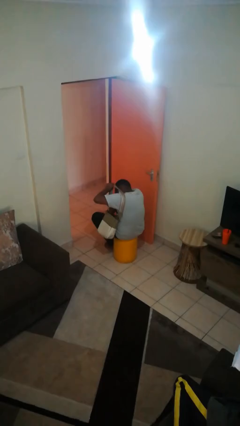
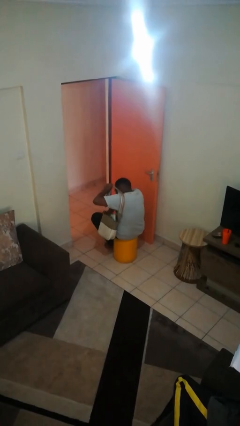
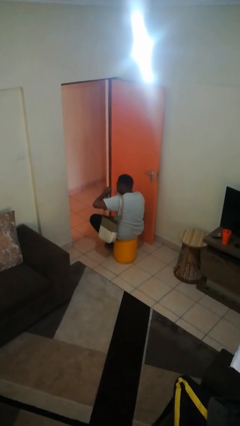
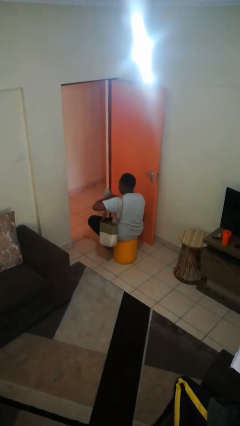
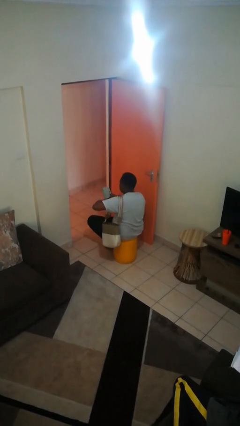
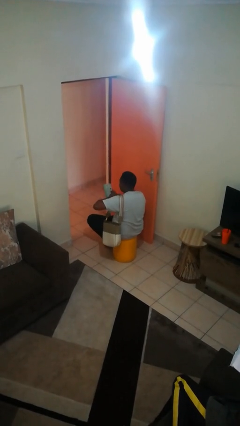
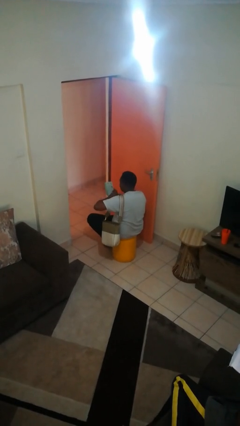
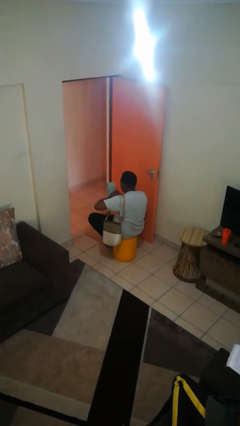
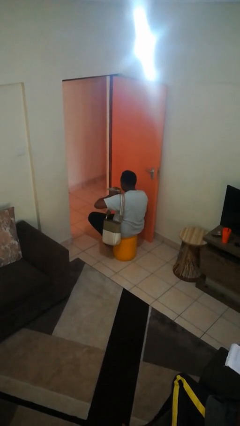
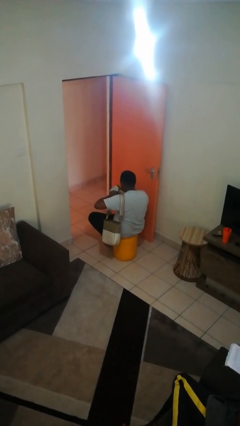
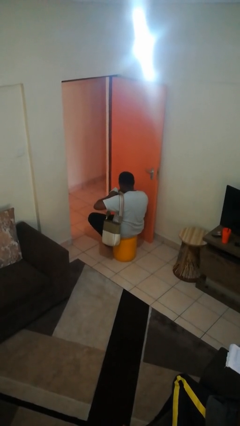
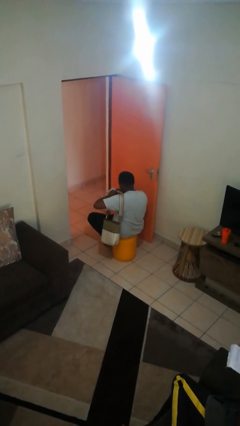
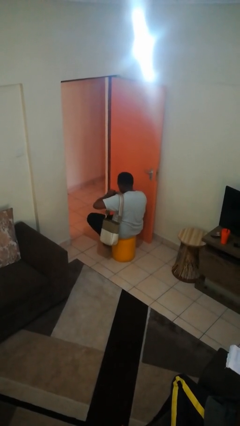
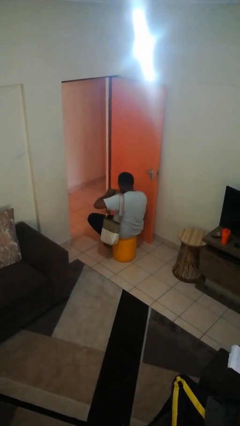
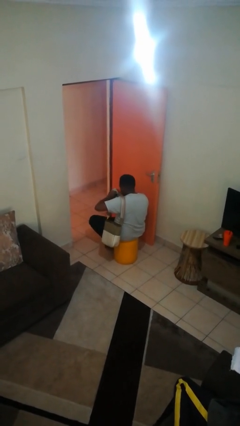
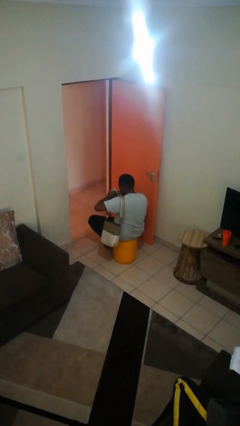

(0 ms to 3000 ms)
person takes object from purse

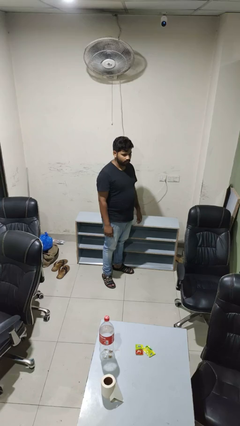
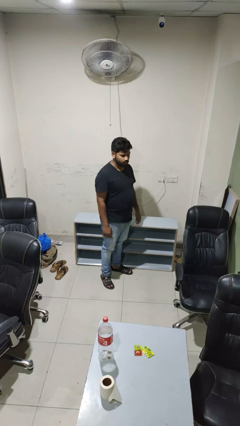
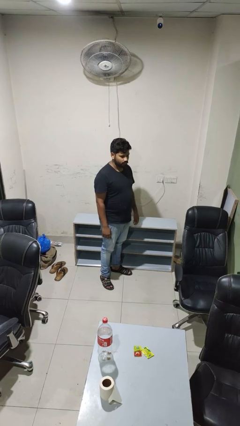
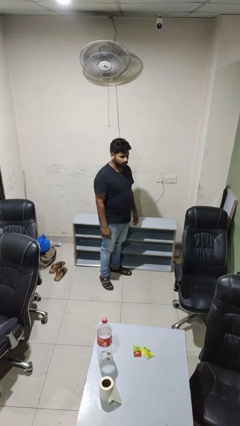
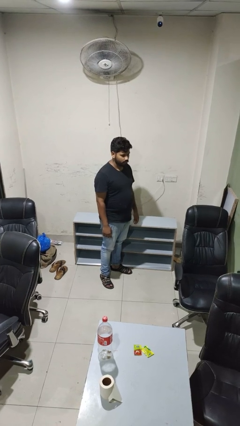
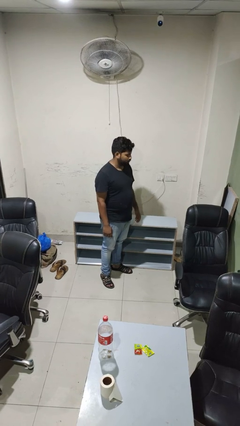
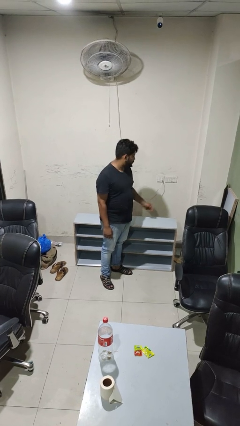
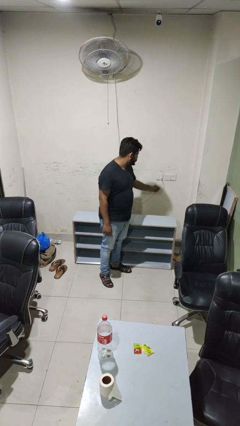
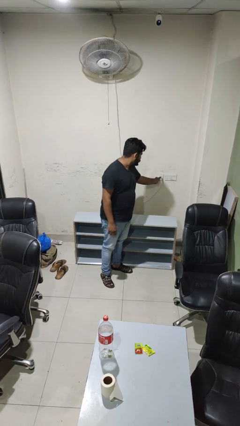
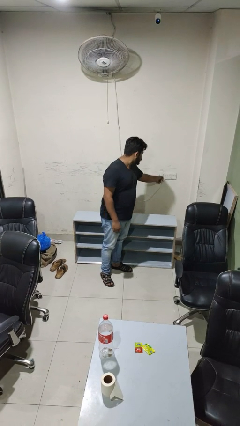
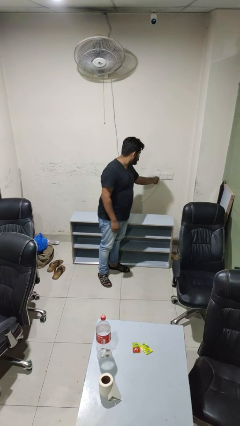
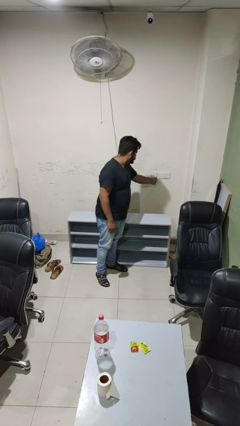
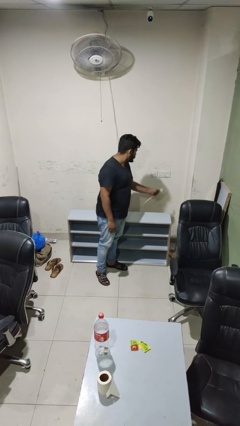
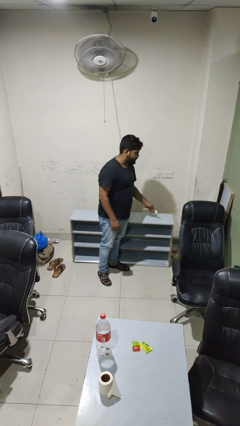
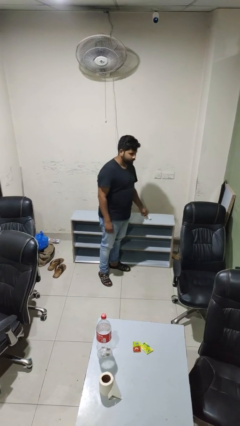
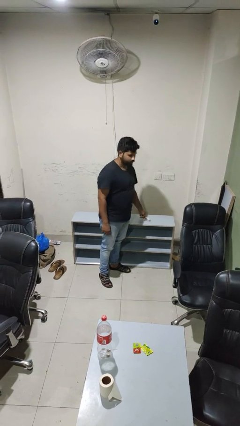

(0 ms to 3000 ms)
person unplugs from electrical socket

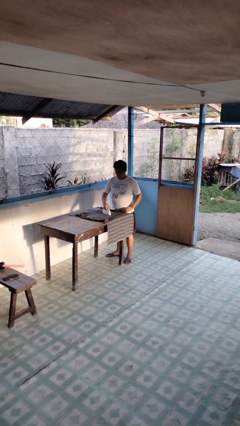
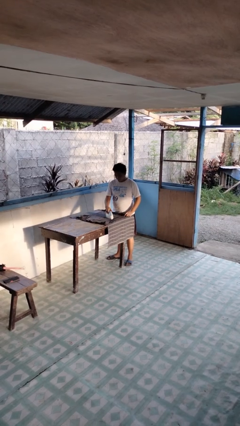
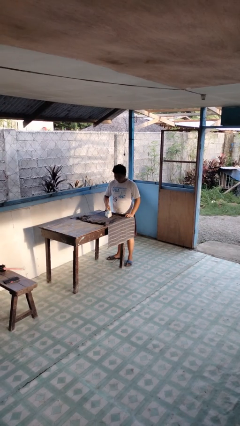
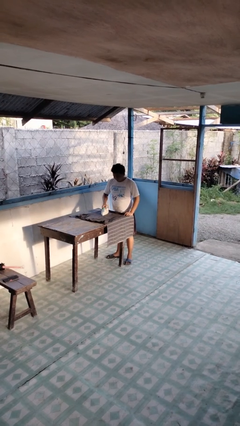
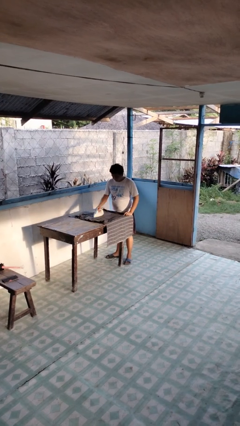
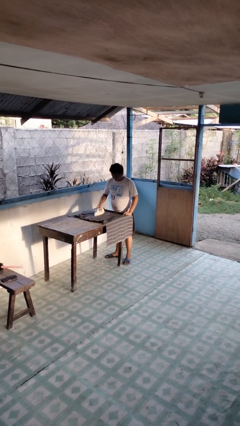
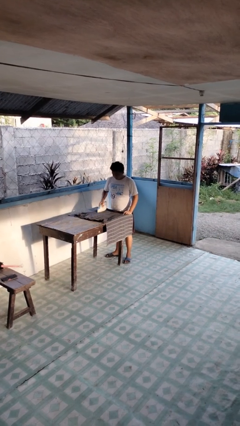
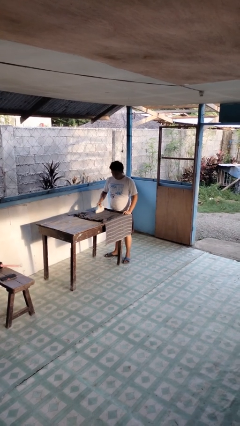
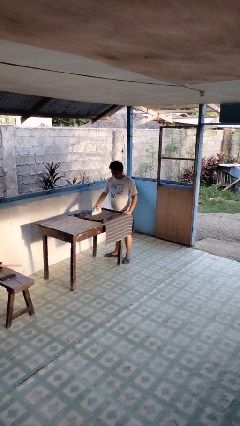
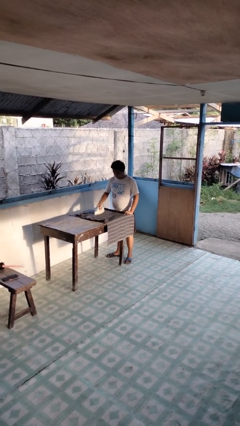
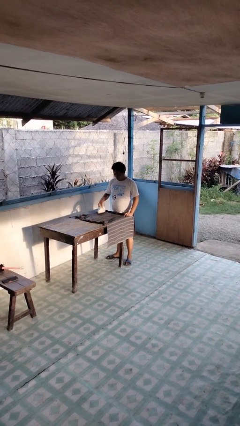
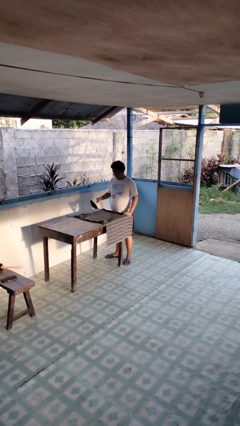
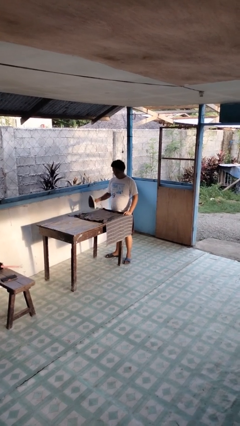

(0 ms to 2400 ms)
person irons clothes

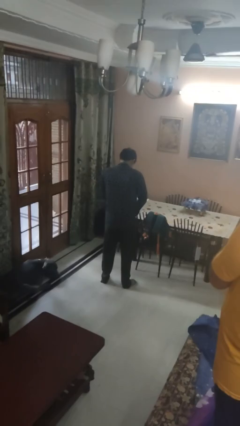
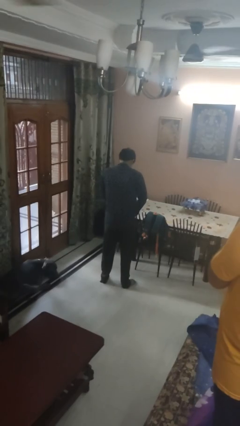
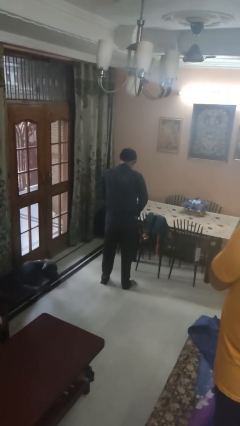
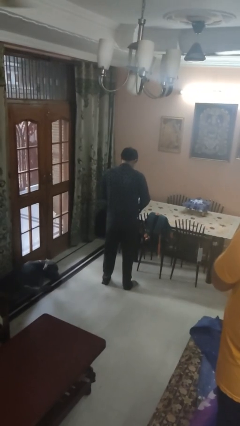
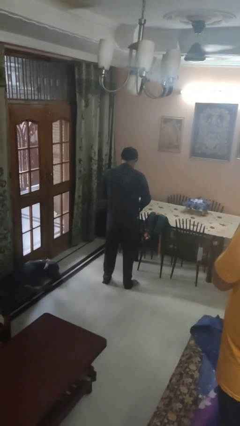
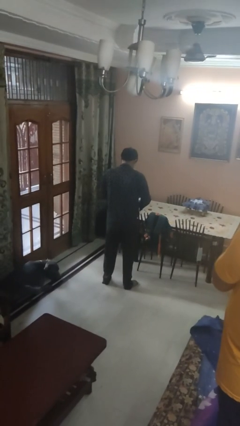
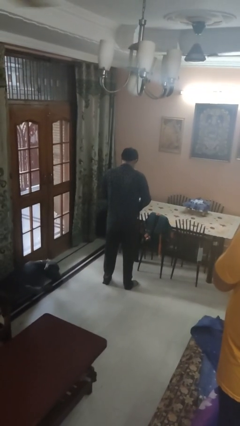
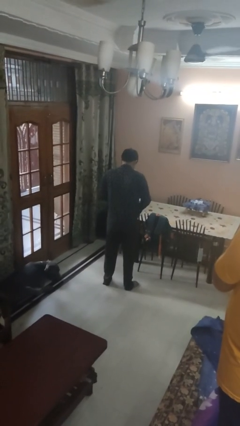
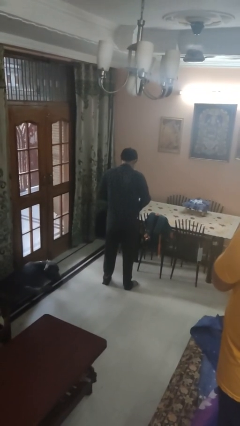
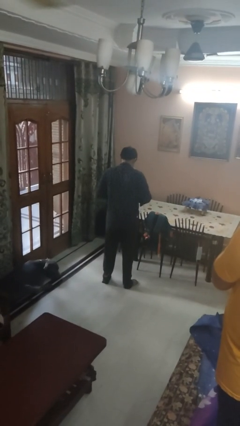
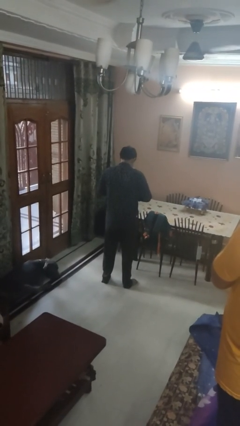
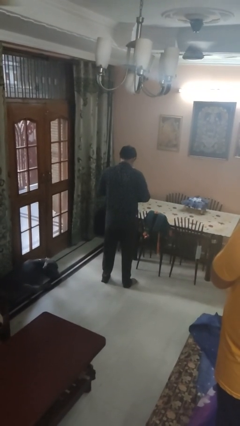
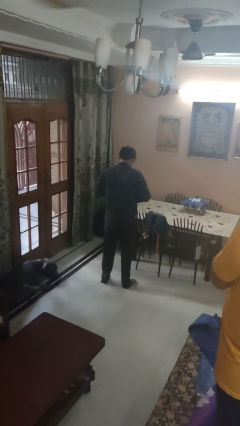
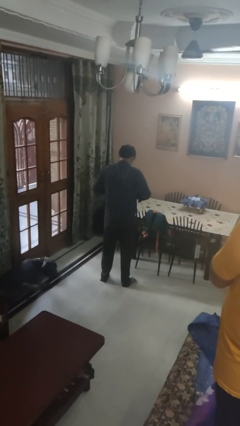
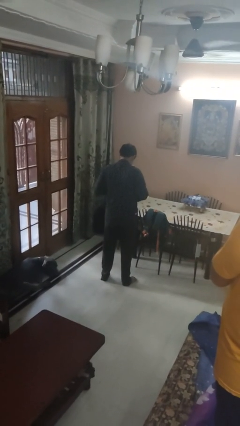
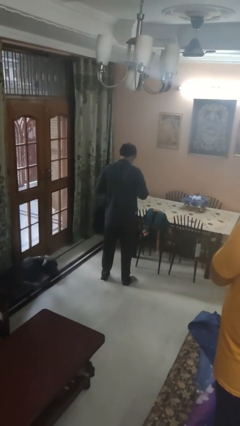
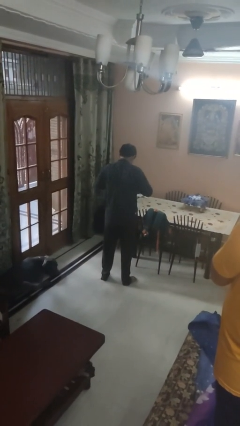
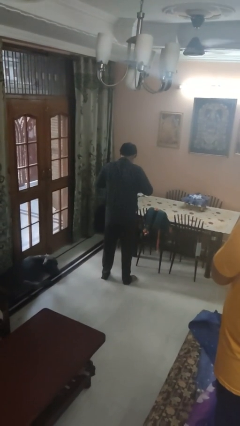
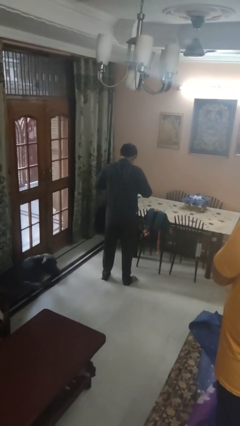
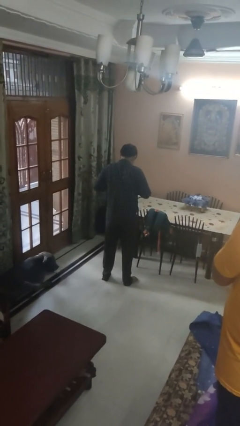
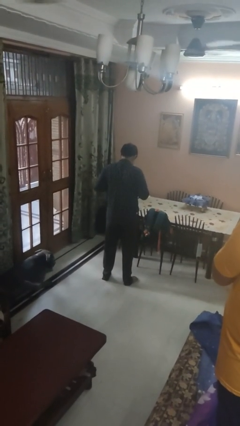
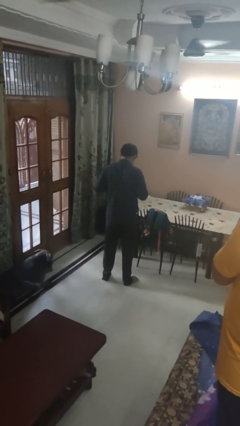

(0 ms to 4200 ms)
person unbuttons shirt

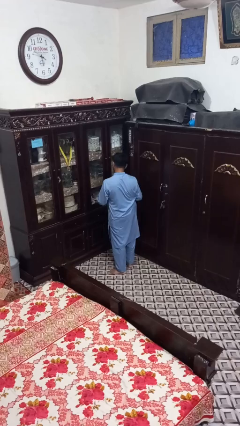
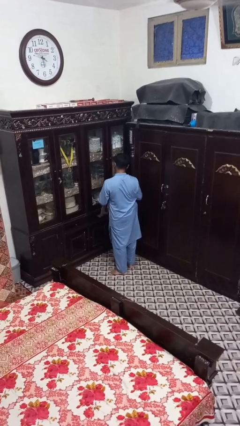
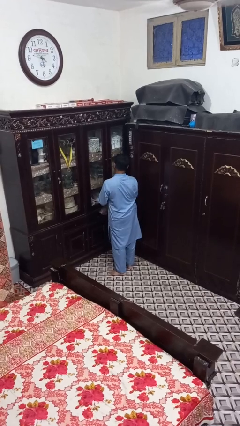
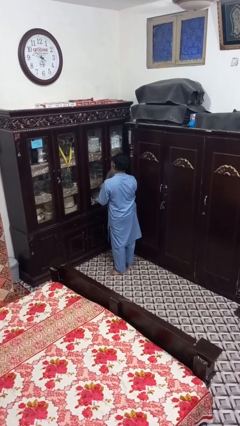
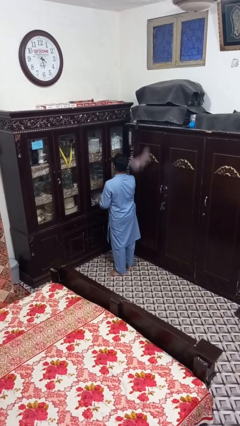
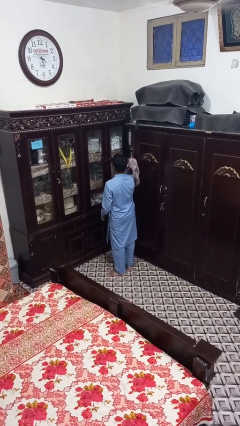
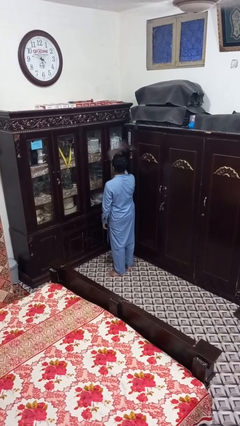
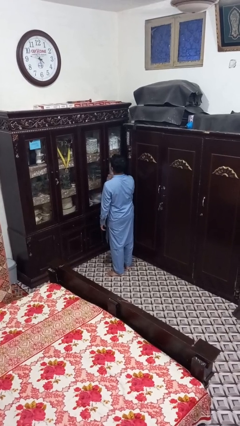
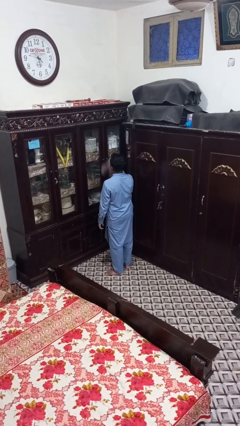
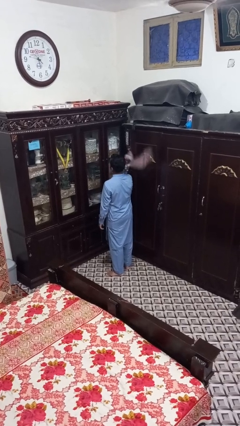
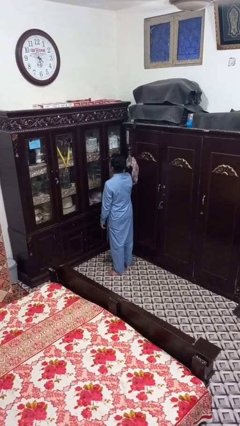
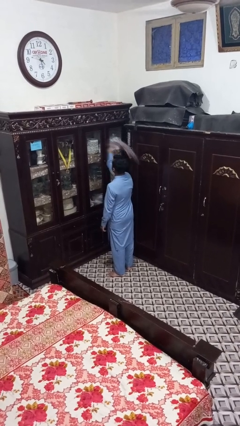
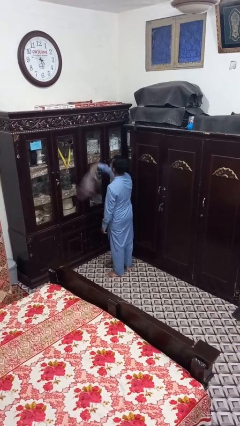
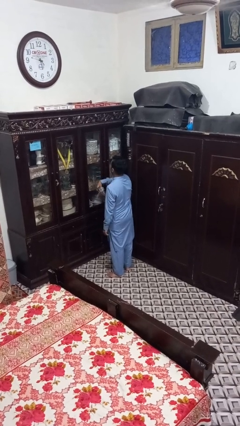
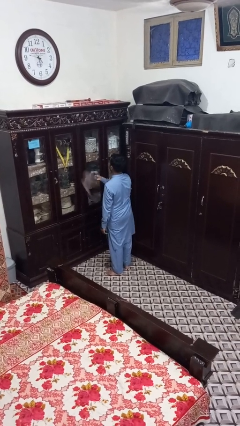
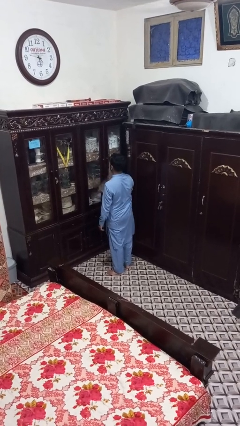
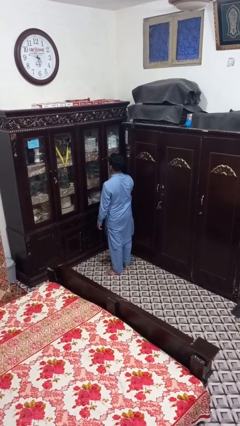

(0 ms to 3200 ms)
person dusts furniture

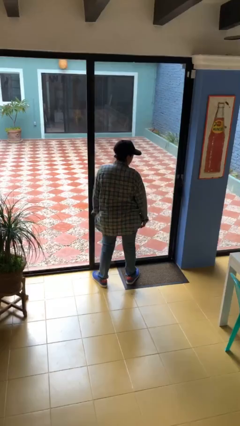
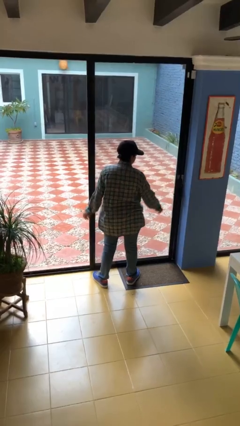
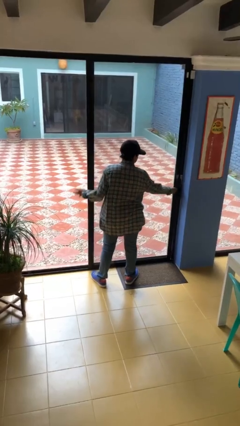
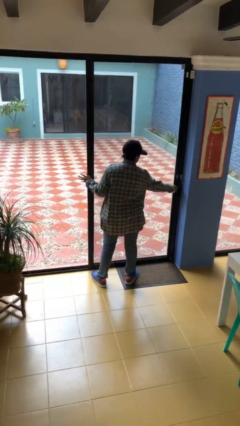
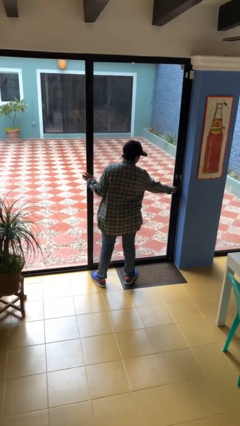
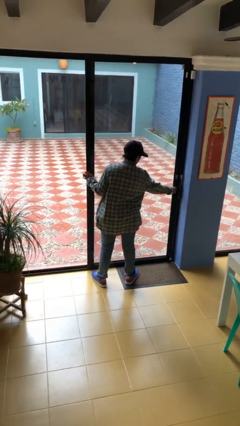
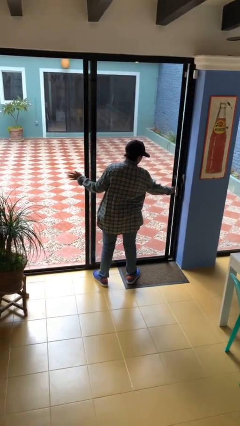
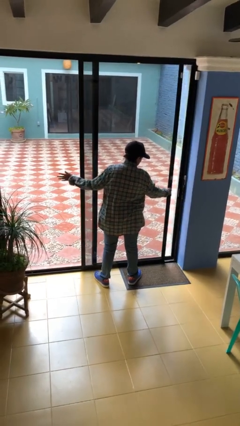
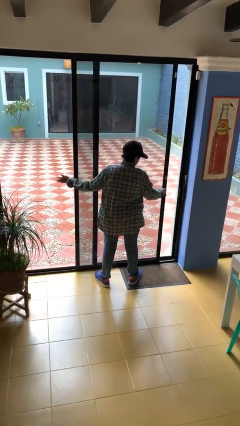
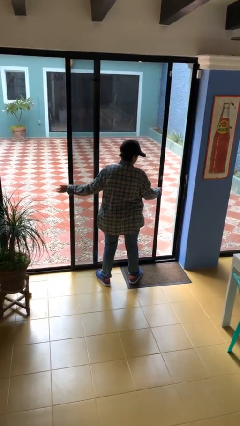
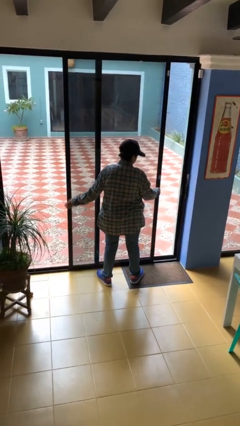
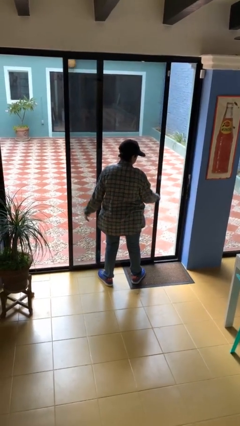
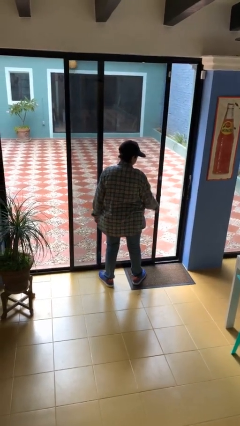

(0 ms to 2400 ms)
person opens sliding door
